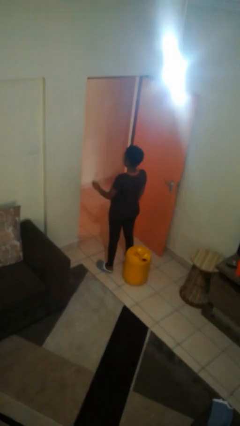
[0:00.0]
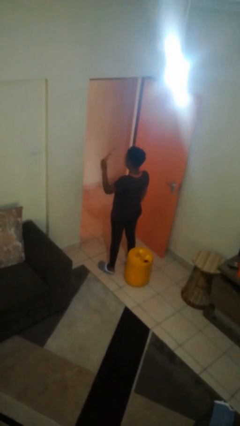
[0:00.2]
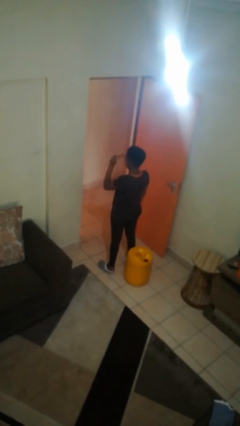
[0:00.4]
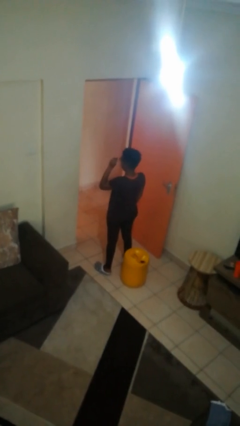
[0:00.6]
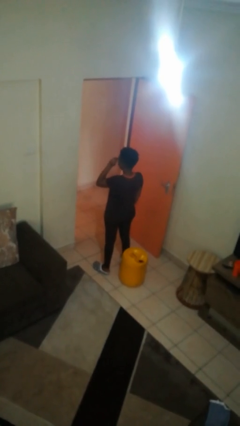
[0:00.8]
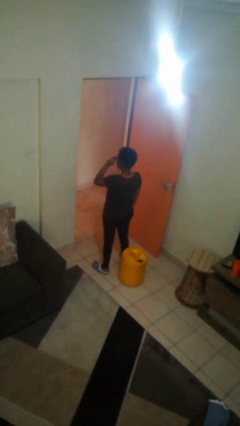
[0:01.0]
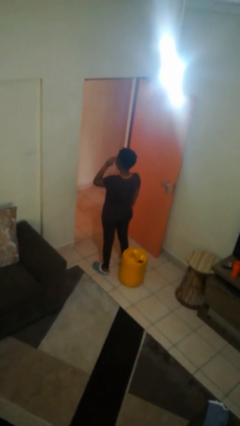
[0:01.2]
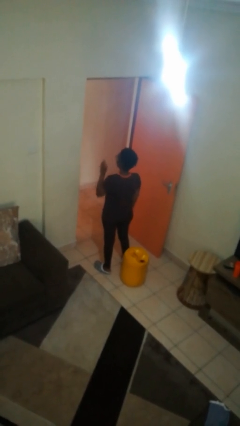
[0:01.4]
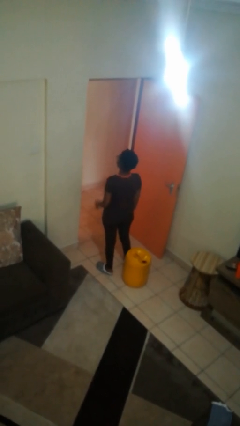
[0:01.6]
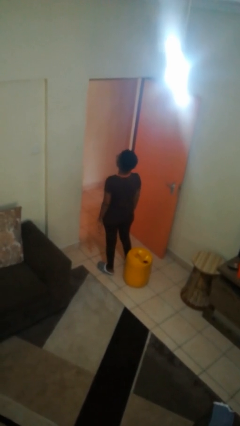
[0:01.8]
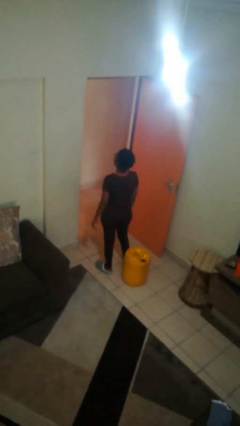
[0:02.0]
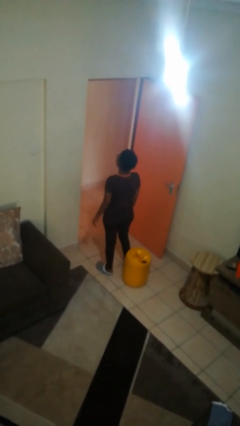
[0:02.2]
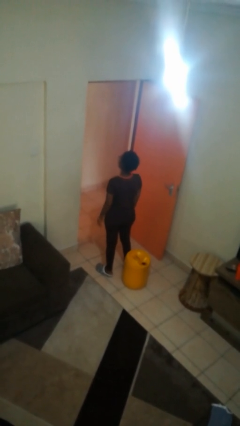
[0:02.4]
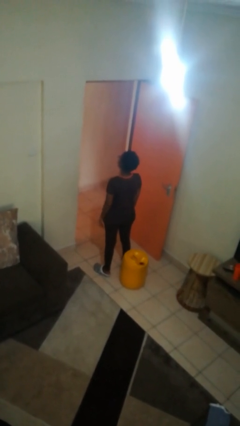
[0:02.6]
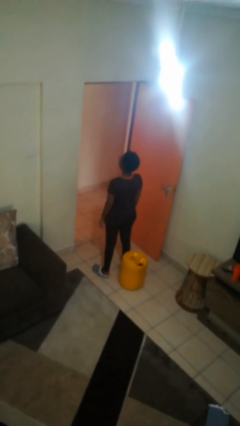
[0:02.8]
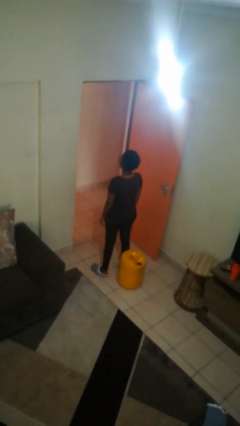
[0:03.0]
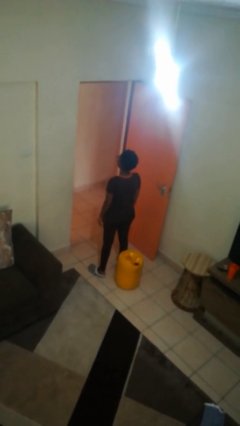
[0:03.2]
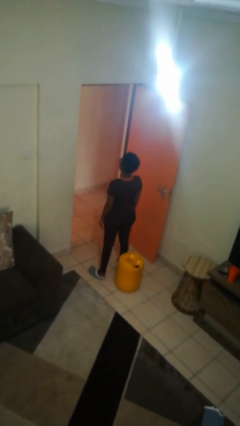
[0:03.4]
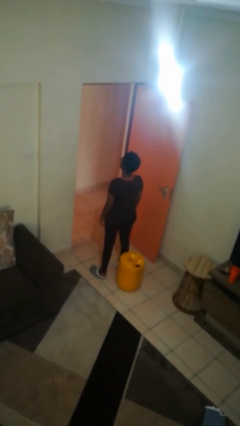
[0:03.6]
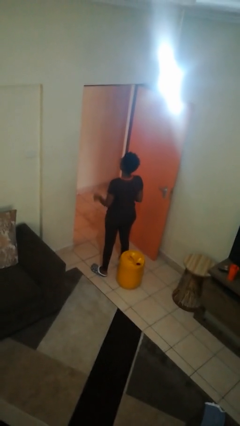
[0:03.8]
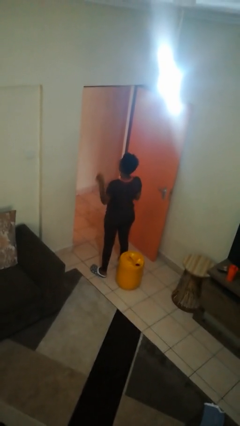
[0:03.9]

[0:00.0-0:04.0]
person puts on glasses

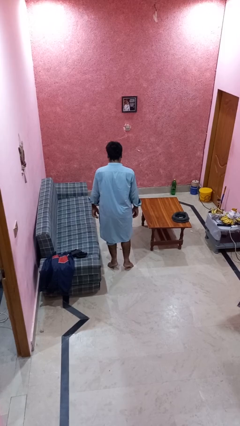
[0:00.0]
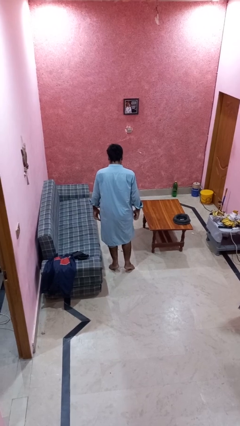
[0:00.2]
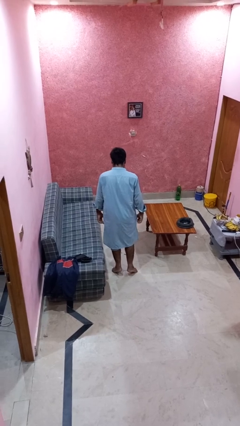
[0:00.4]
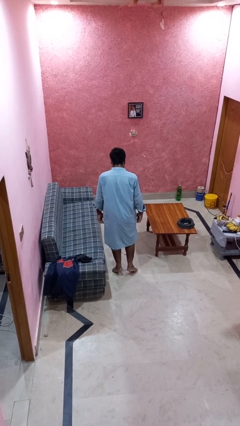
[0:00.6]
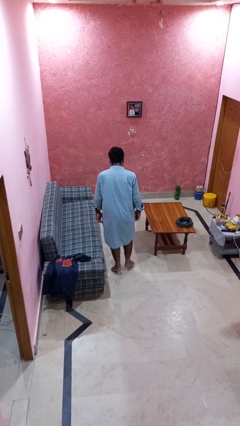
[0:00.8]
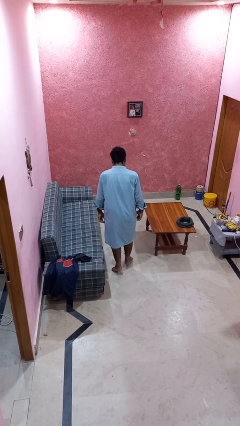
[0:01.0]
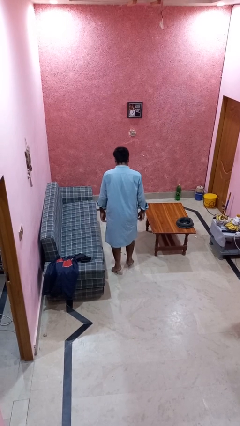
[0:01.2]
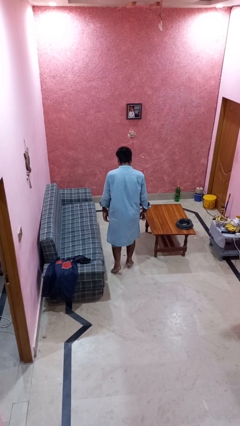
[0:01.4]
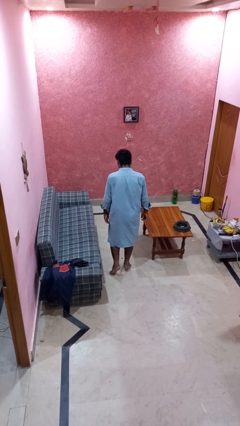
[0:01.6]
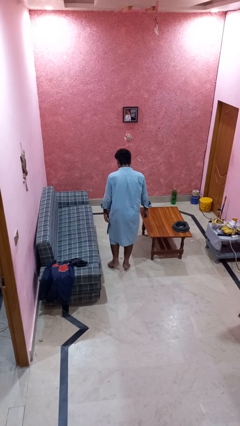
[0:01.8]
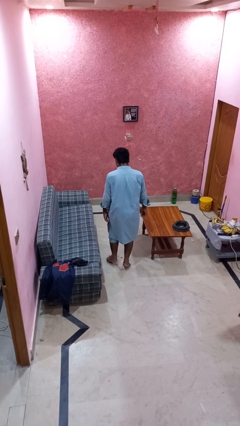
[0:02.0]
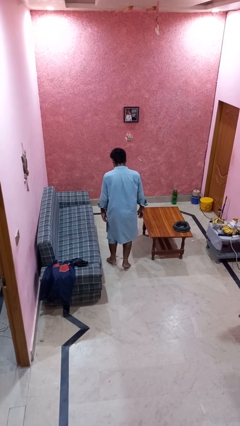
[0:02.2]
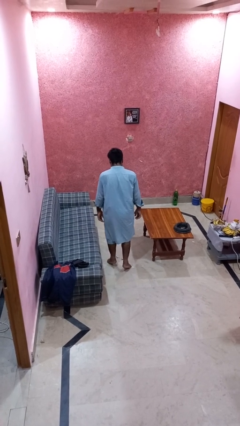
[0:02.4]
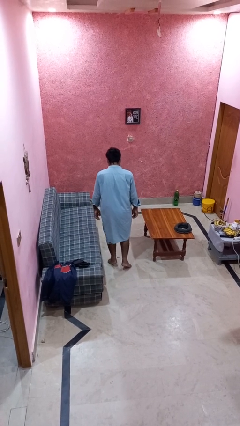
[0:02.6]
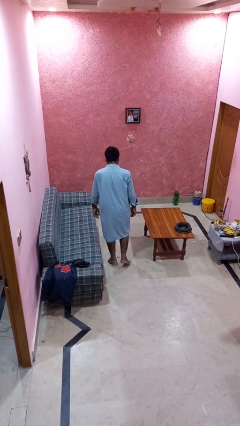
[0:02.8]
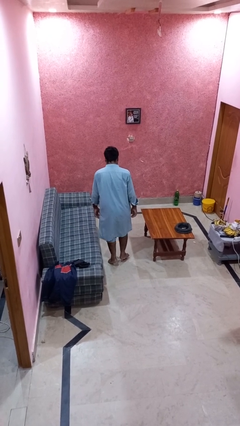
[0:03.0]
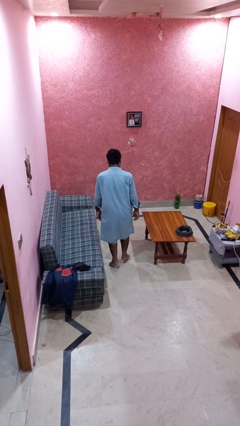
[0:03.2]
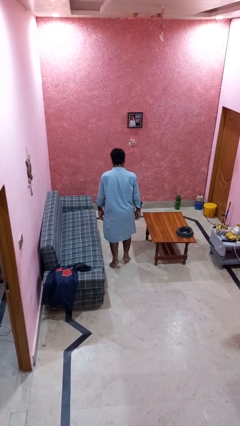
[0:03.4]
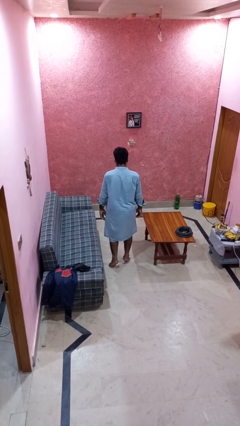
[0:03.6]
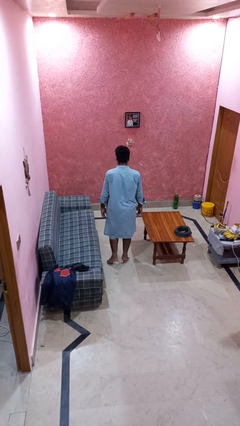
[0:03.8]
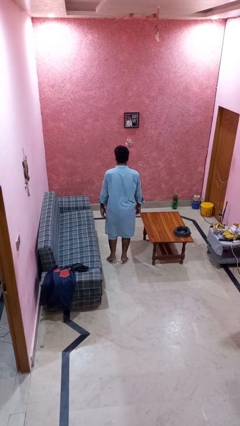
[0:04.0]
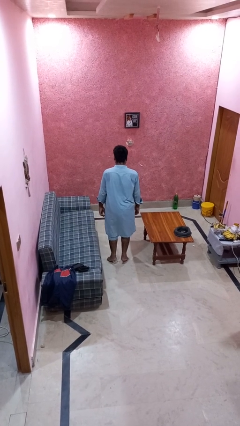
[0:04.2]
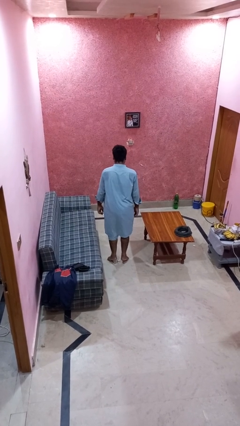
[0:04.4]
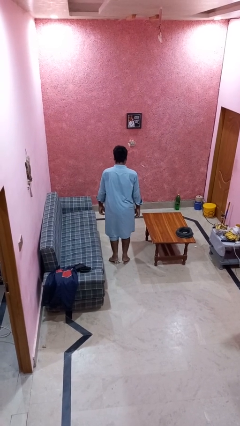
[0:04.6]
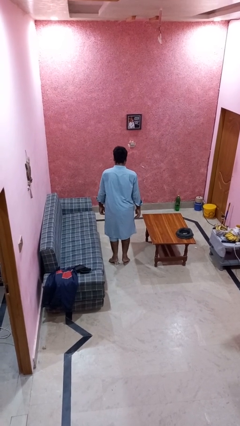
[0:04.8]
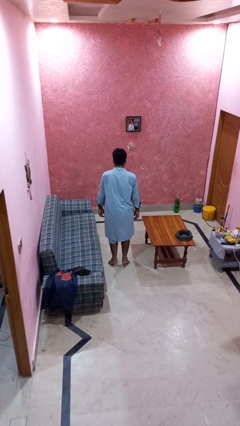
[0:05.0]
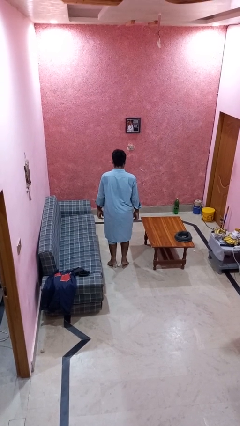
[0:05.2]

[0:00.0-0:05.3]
person walks tiptoe

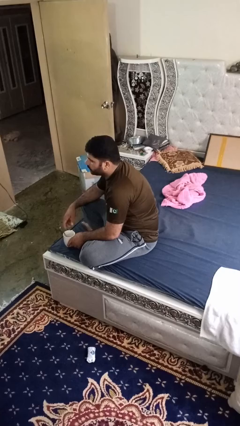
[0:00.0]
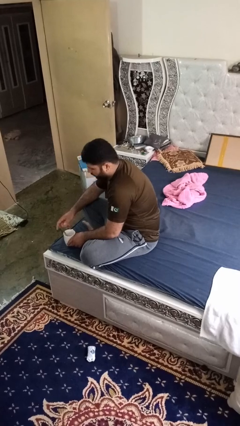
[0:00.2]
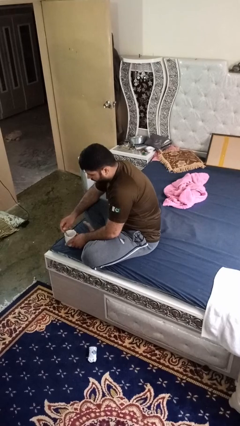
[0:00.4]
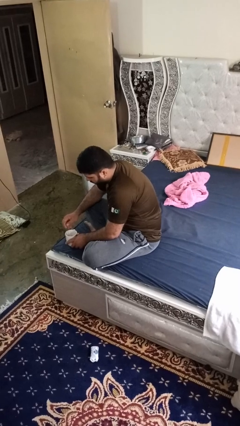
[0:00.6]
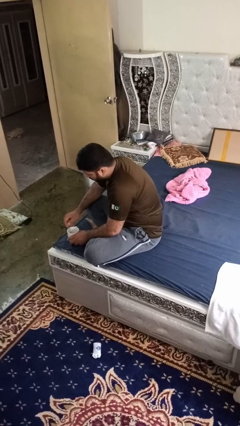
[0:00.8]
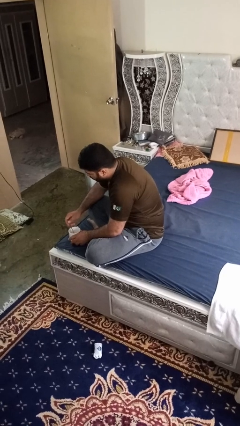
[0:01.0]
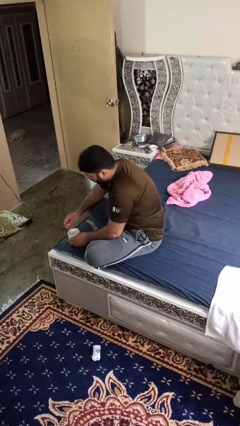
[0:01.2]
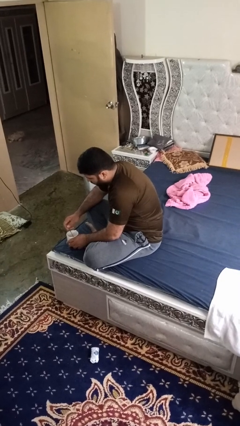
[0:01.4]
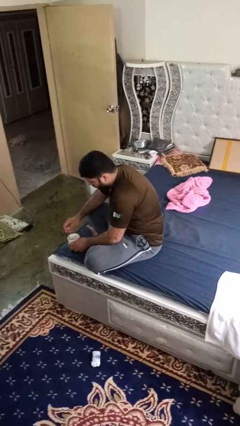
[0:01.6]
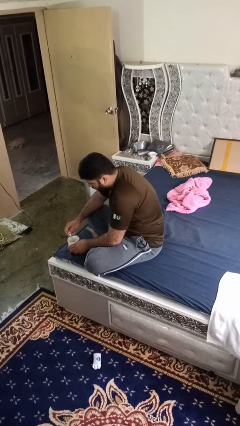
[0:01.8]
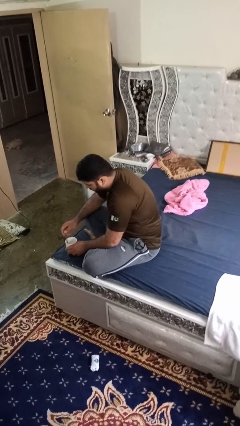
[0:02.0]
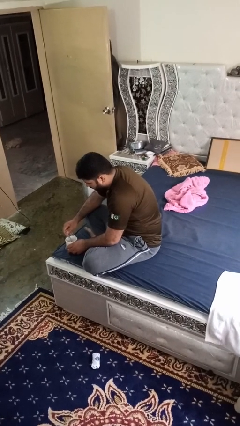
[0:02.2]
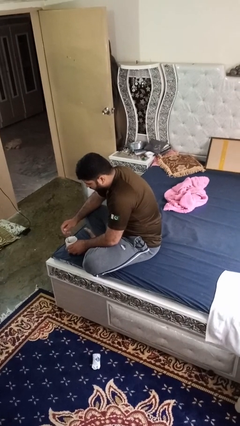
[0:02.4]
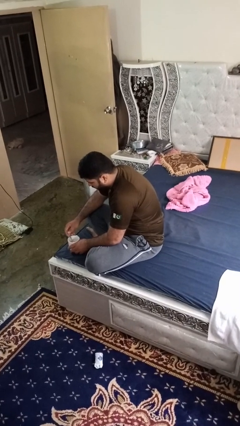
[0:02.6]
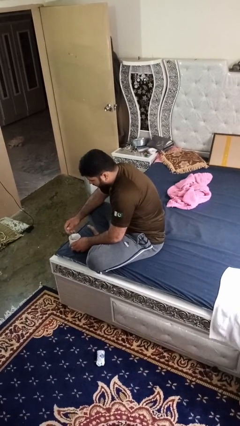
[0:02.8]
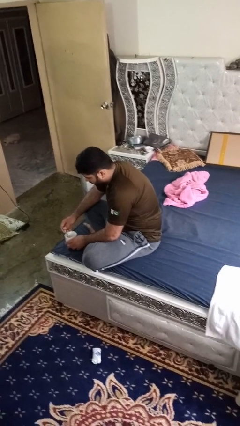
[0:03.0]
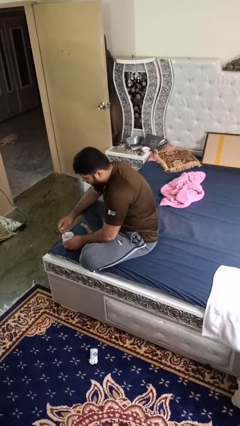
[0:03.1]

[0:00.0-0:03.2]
person stirs mug

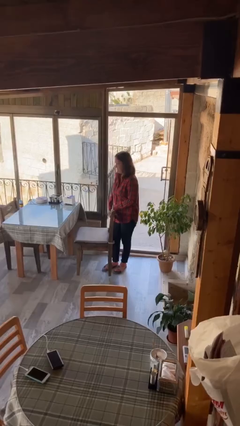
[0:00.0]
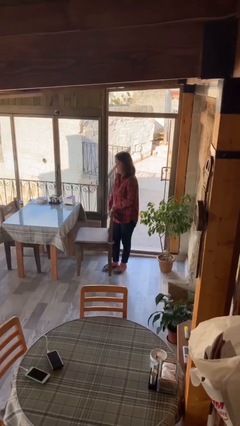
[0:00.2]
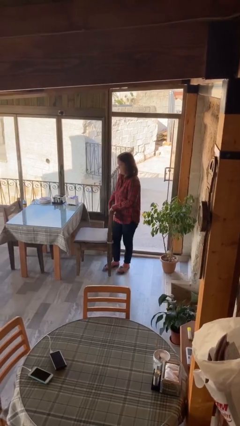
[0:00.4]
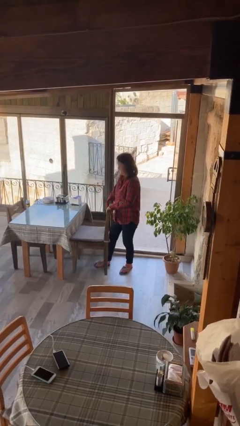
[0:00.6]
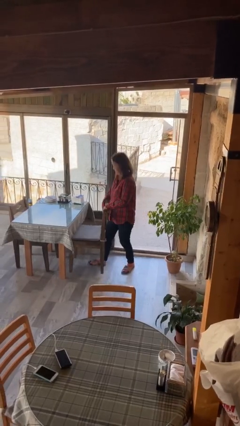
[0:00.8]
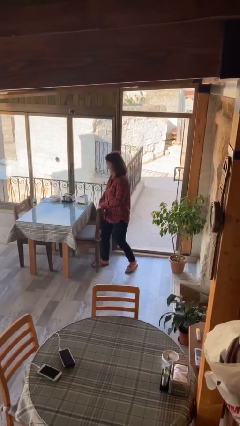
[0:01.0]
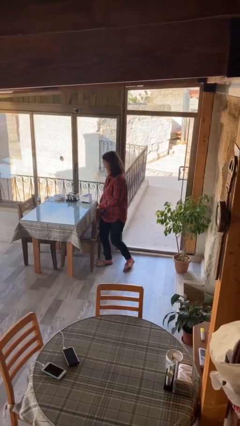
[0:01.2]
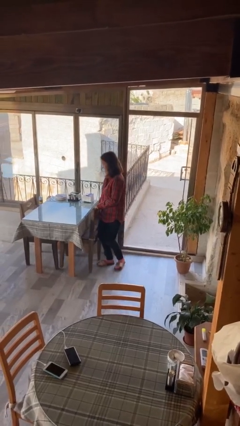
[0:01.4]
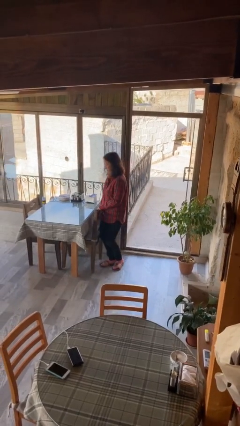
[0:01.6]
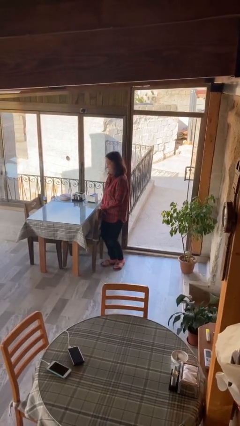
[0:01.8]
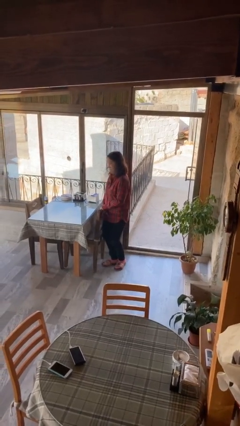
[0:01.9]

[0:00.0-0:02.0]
person pushes in chair

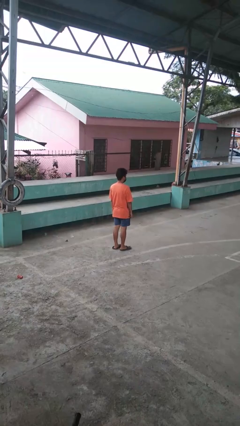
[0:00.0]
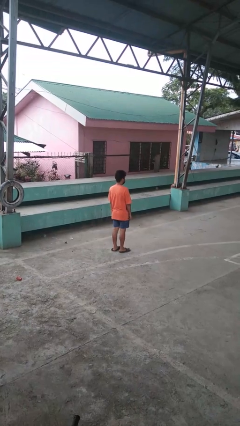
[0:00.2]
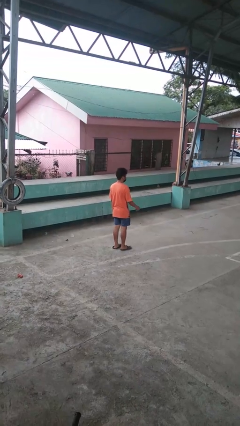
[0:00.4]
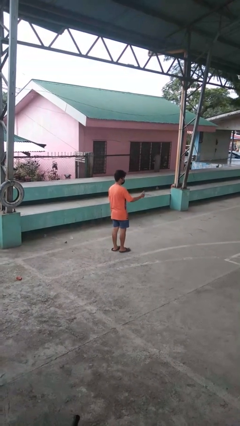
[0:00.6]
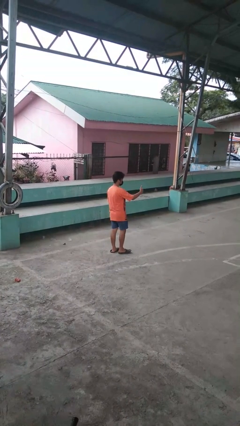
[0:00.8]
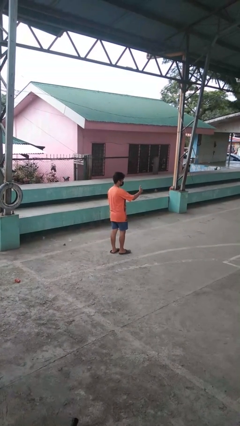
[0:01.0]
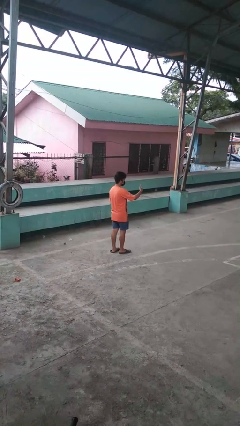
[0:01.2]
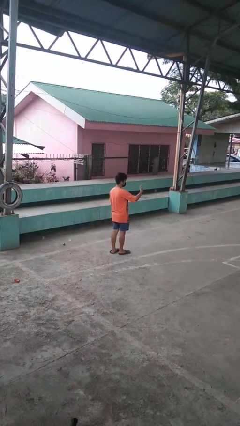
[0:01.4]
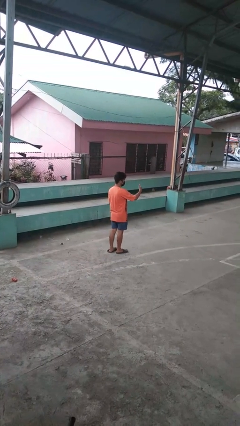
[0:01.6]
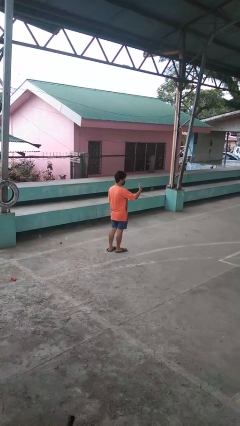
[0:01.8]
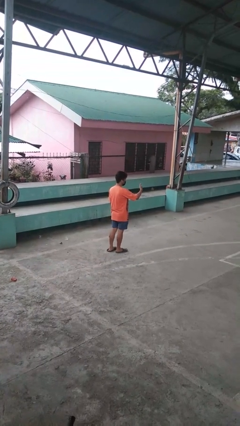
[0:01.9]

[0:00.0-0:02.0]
person gestures thumbs up

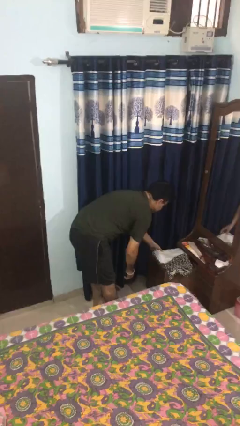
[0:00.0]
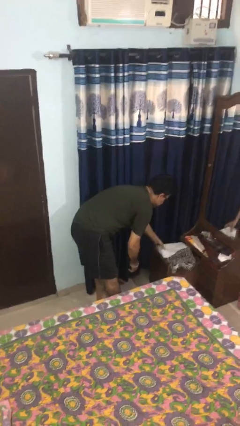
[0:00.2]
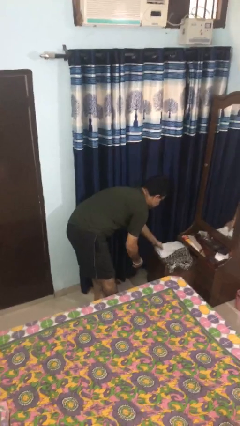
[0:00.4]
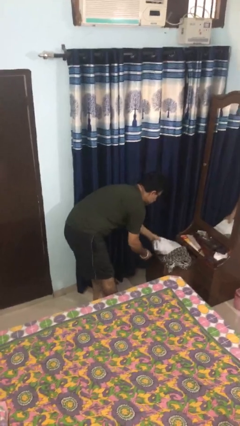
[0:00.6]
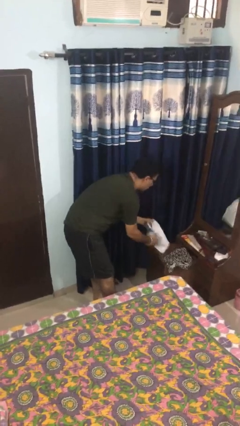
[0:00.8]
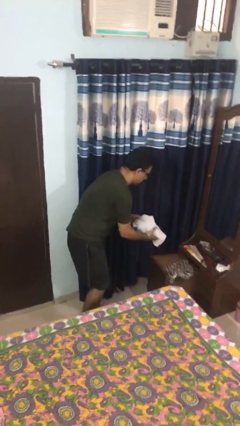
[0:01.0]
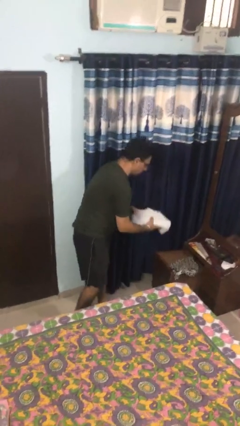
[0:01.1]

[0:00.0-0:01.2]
person takes clothes from dresser

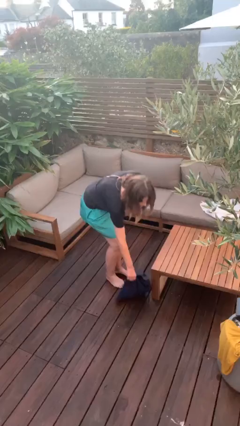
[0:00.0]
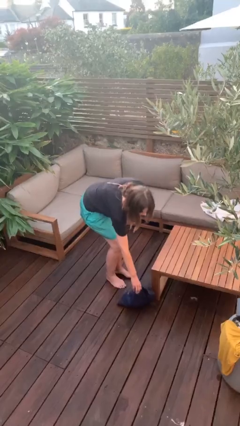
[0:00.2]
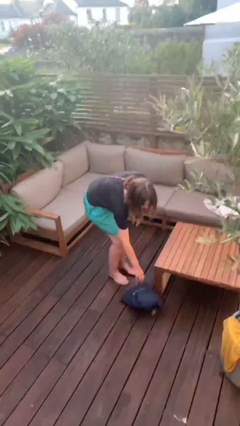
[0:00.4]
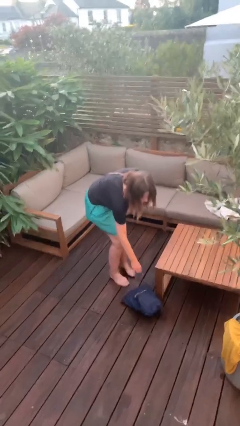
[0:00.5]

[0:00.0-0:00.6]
person puts down object on floor
